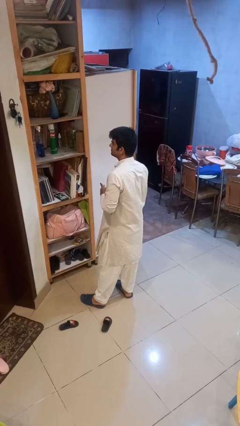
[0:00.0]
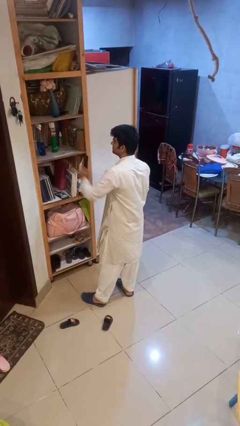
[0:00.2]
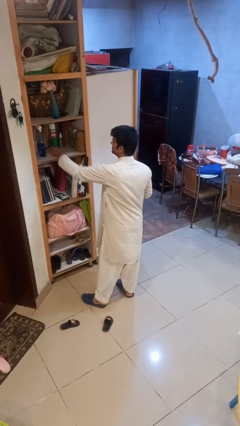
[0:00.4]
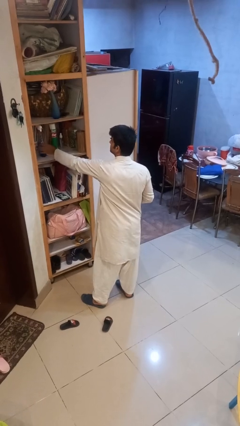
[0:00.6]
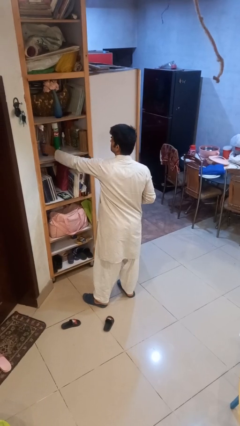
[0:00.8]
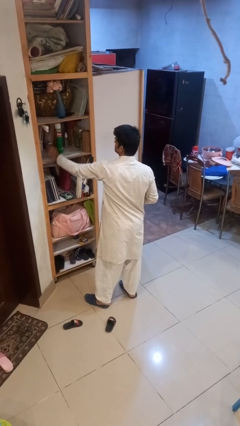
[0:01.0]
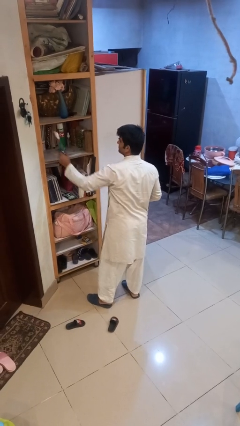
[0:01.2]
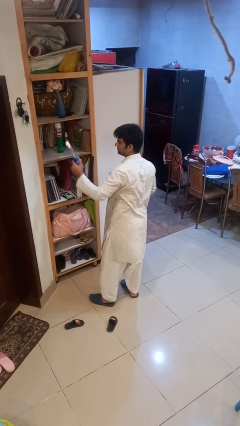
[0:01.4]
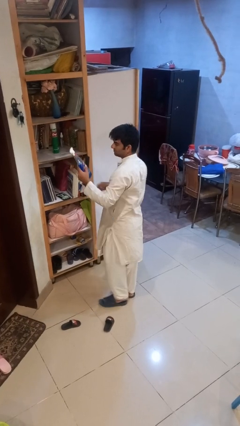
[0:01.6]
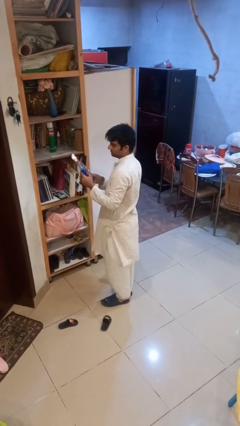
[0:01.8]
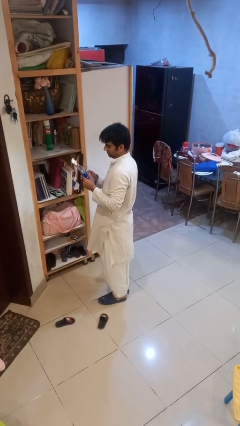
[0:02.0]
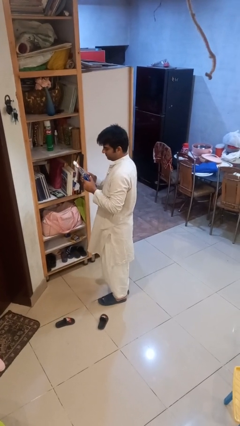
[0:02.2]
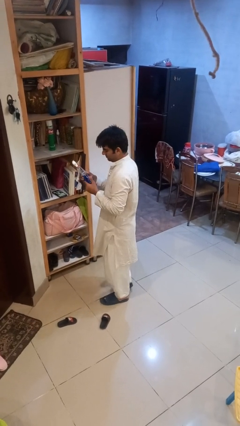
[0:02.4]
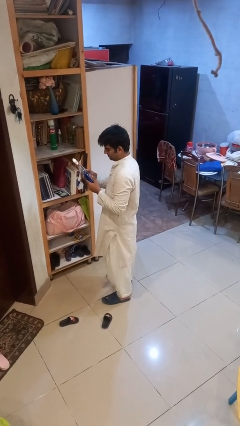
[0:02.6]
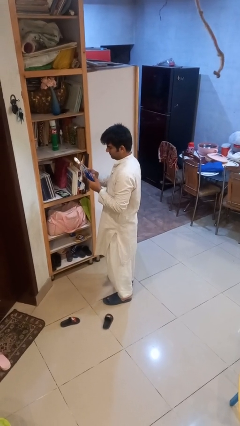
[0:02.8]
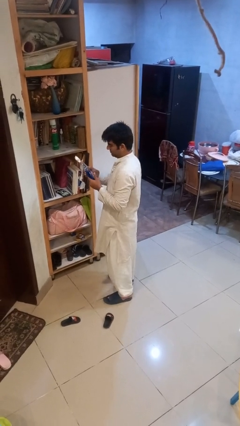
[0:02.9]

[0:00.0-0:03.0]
person picks up object from shelf

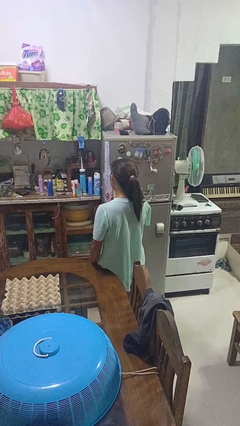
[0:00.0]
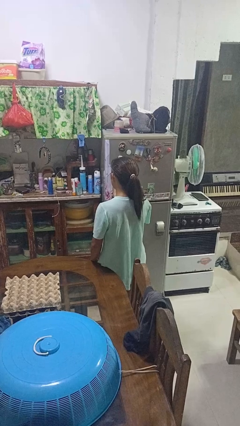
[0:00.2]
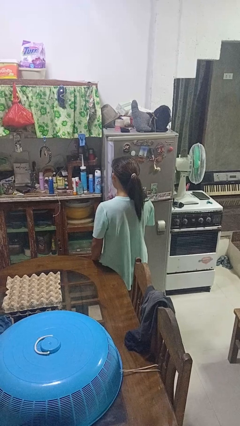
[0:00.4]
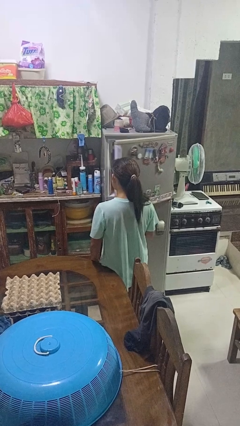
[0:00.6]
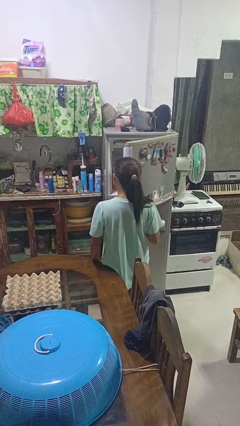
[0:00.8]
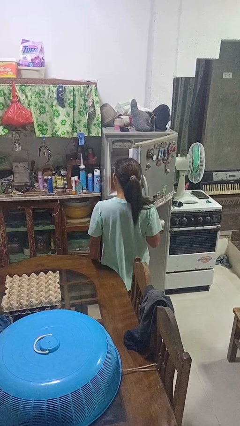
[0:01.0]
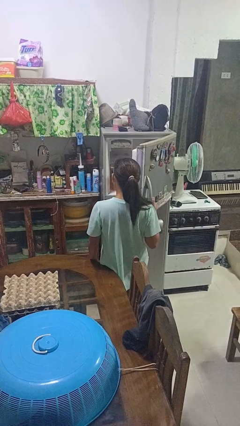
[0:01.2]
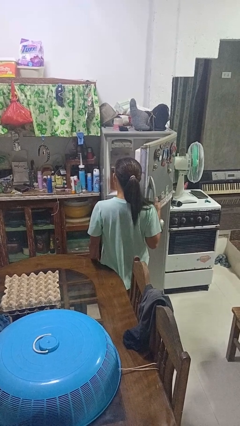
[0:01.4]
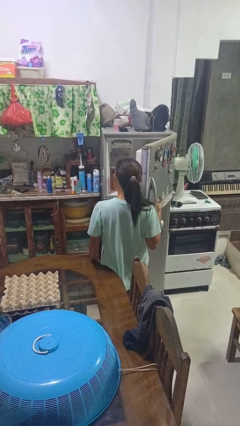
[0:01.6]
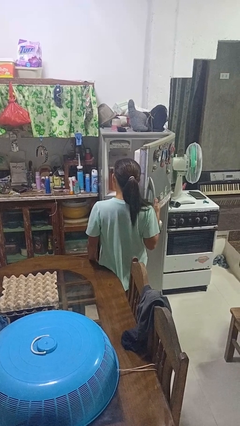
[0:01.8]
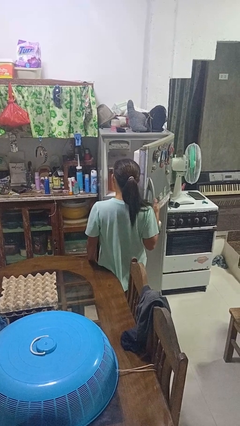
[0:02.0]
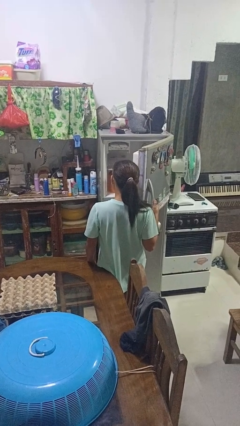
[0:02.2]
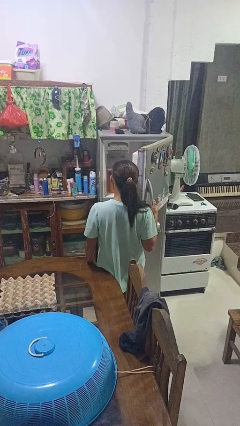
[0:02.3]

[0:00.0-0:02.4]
person opens refrigerator

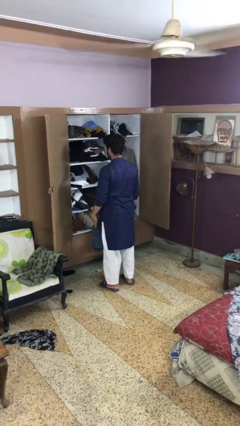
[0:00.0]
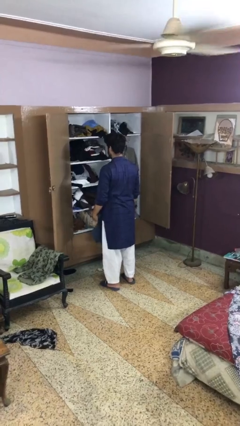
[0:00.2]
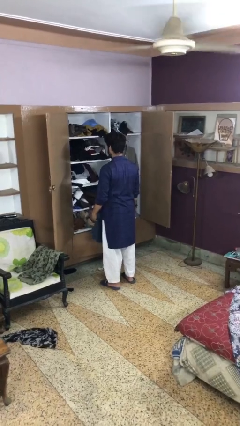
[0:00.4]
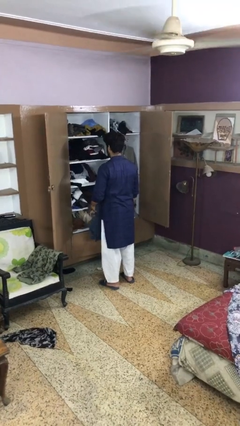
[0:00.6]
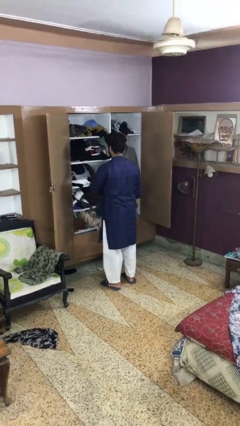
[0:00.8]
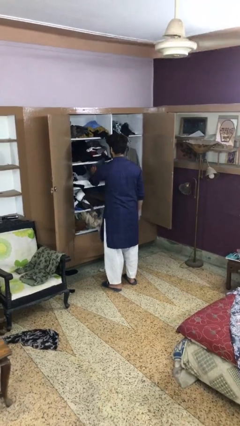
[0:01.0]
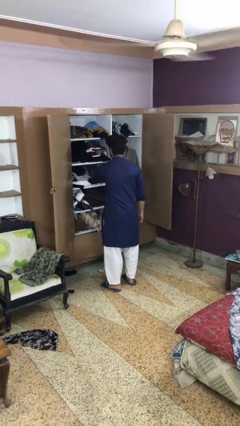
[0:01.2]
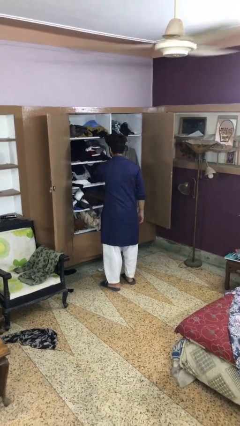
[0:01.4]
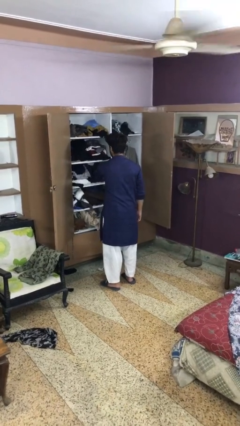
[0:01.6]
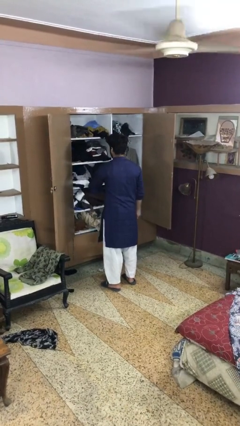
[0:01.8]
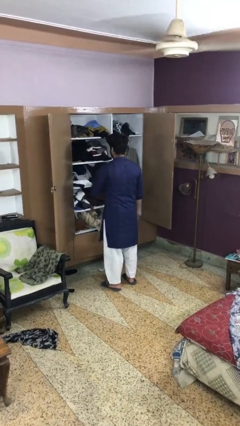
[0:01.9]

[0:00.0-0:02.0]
person puts clothes into dresser

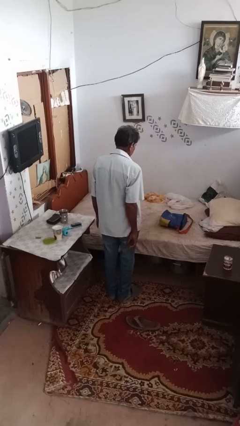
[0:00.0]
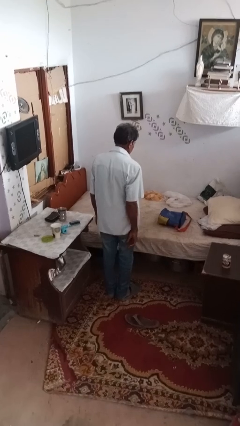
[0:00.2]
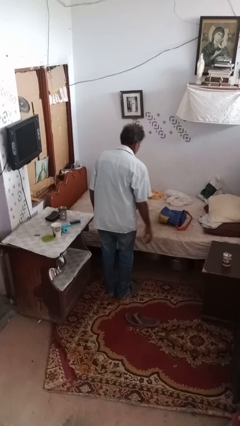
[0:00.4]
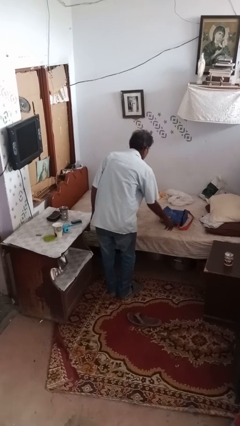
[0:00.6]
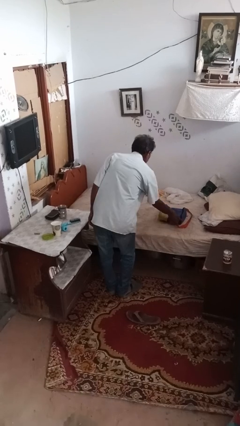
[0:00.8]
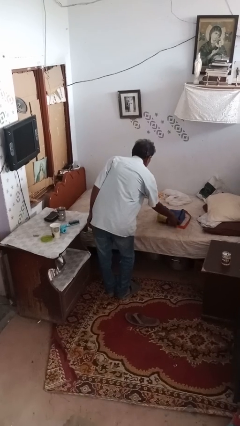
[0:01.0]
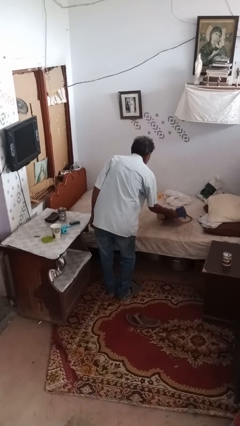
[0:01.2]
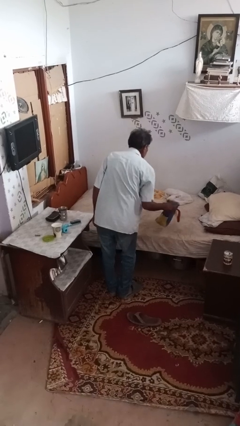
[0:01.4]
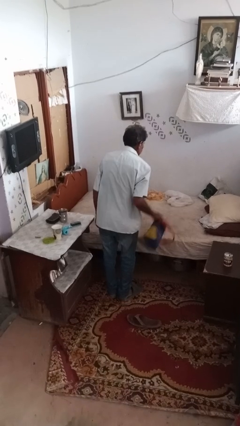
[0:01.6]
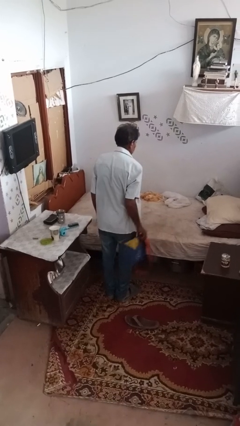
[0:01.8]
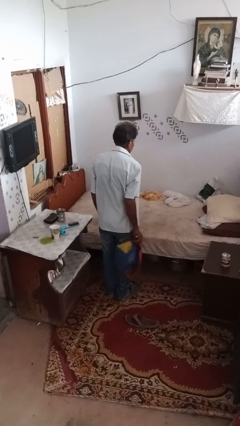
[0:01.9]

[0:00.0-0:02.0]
person picks up object from bed

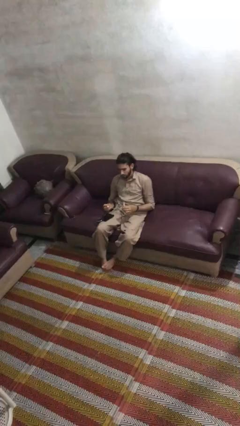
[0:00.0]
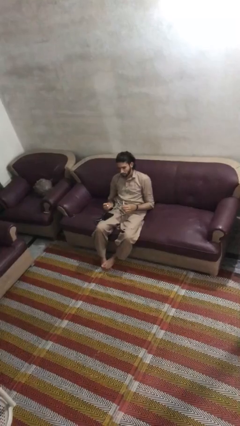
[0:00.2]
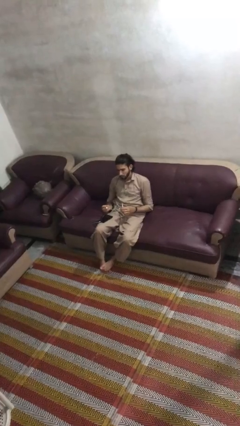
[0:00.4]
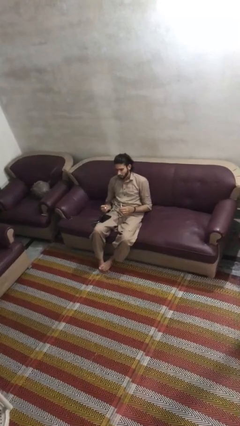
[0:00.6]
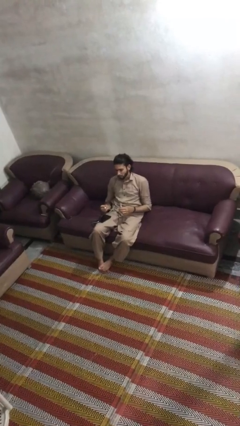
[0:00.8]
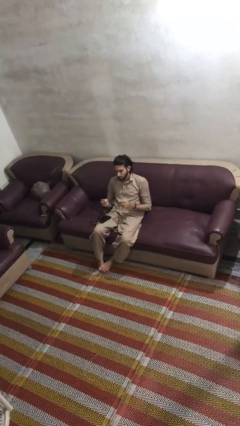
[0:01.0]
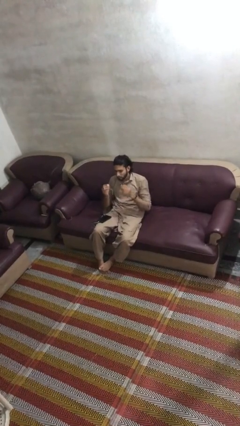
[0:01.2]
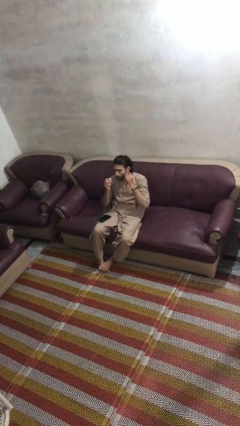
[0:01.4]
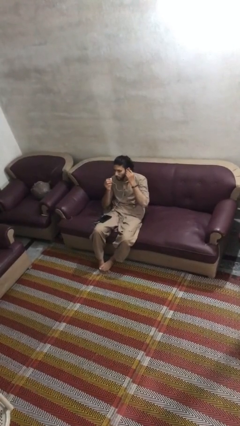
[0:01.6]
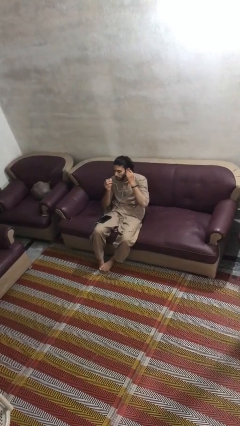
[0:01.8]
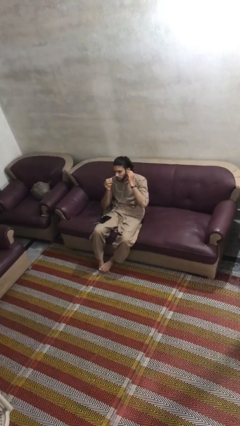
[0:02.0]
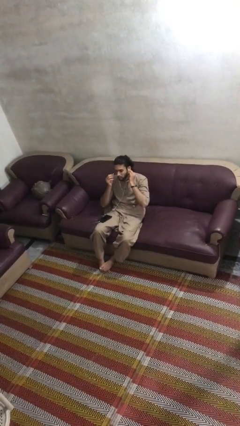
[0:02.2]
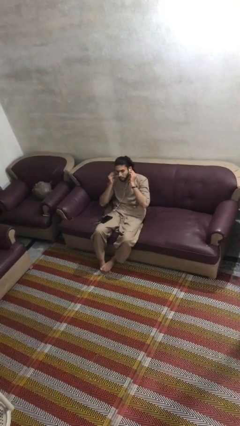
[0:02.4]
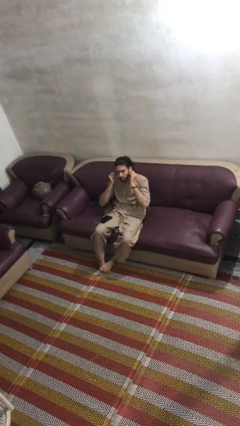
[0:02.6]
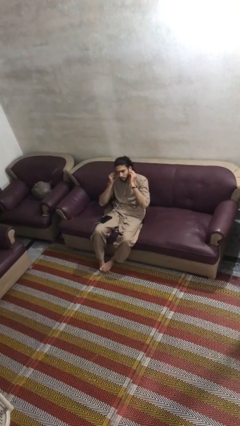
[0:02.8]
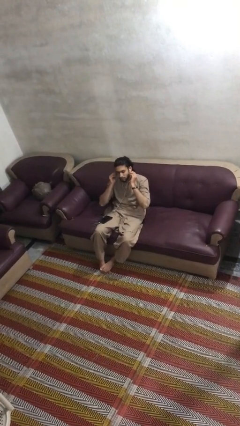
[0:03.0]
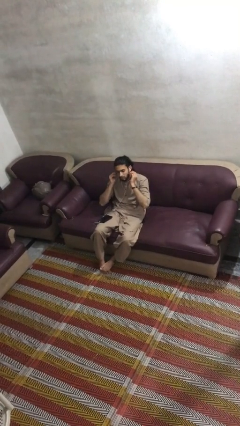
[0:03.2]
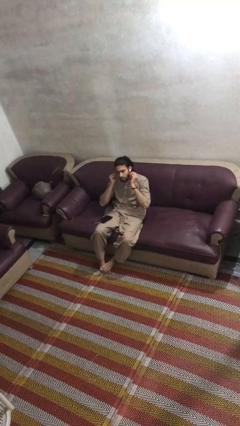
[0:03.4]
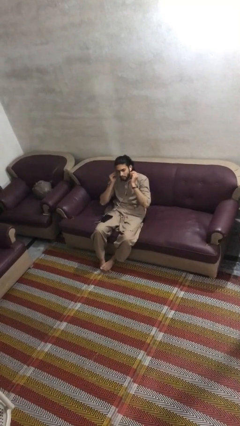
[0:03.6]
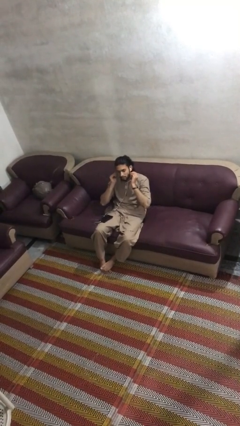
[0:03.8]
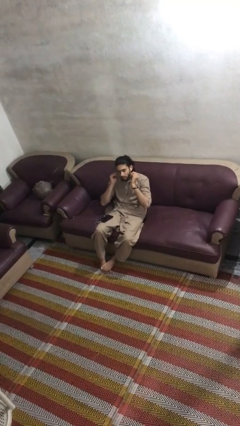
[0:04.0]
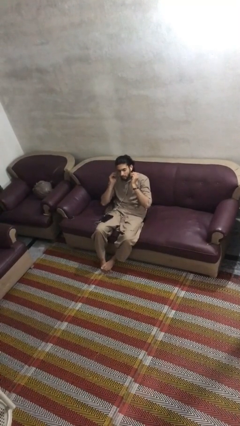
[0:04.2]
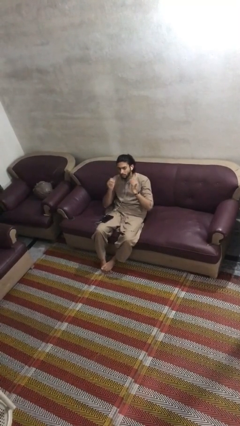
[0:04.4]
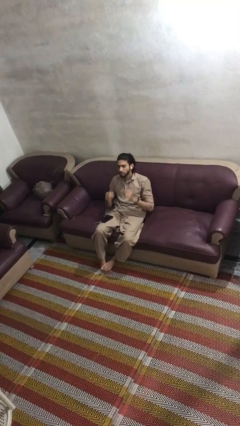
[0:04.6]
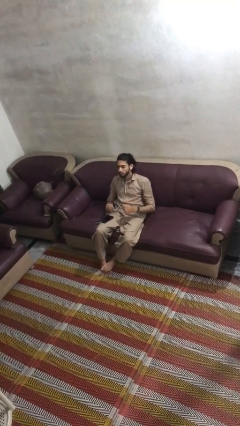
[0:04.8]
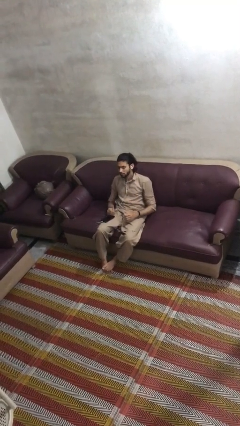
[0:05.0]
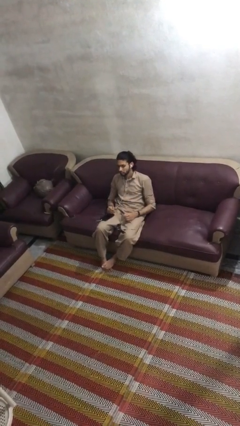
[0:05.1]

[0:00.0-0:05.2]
person puts on headphones

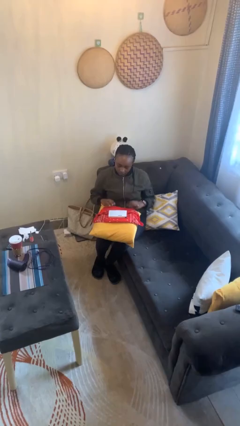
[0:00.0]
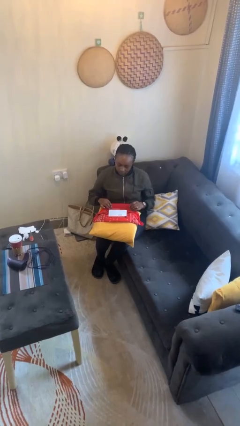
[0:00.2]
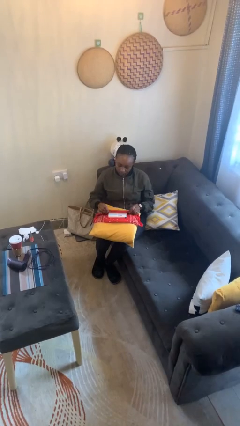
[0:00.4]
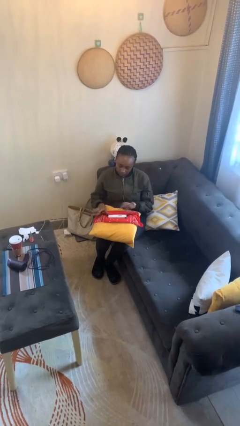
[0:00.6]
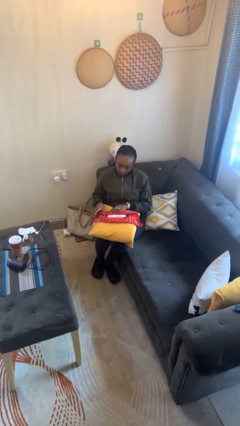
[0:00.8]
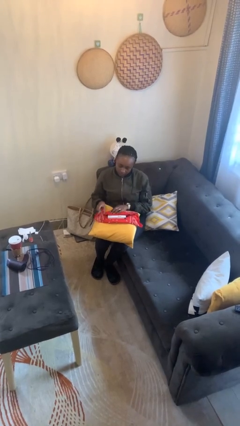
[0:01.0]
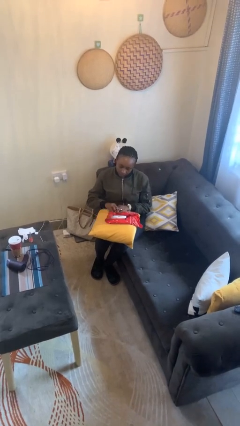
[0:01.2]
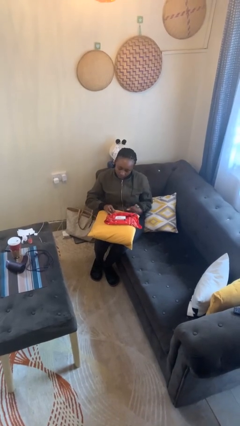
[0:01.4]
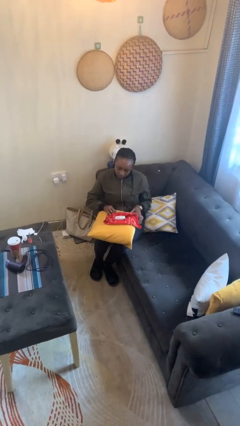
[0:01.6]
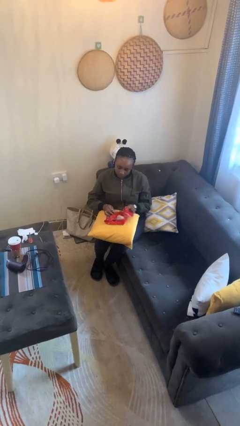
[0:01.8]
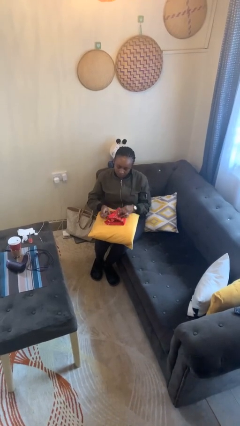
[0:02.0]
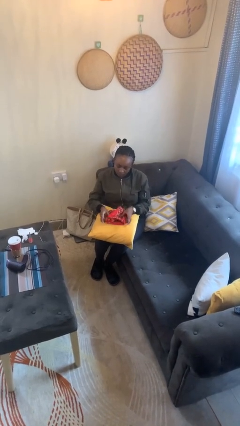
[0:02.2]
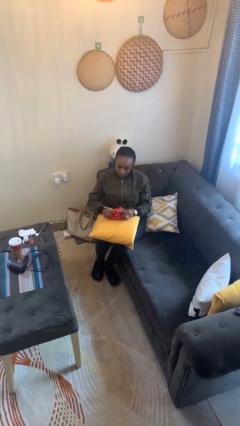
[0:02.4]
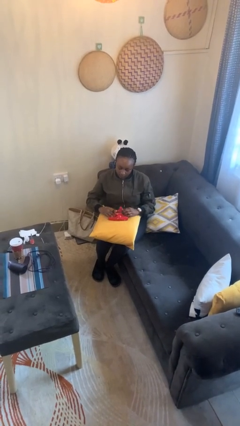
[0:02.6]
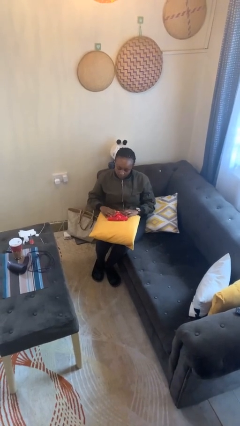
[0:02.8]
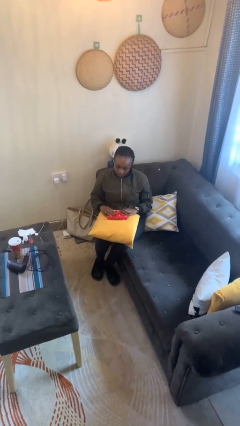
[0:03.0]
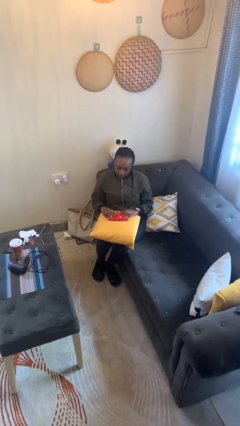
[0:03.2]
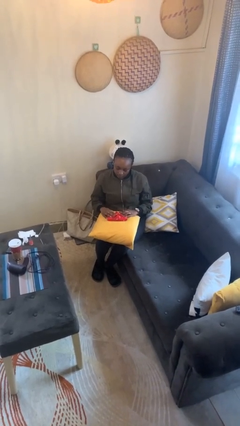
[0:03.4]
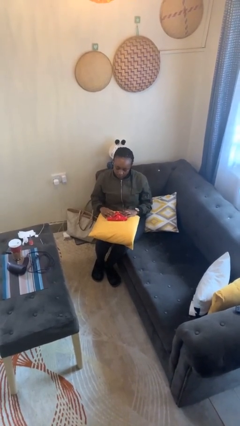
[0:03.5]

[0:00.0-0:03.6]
person wraps box
